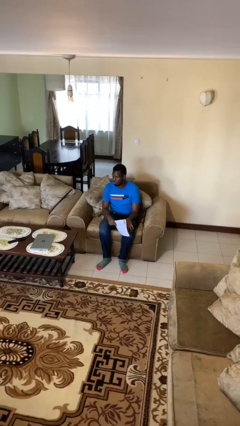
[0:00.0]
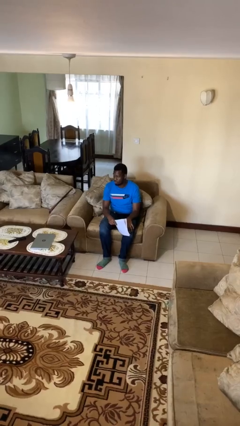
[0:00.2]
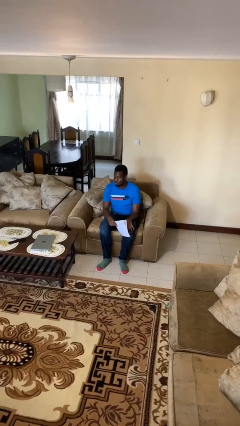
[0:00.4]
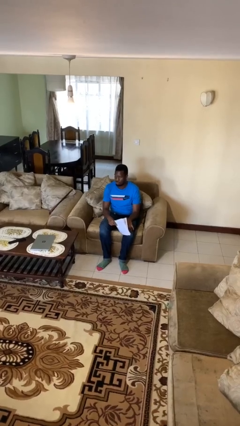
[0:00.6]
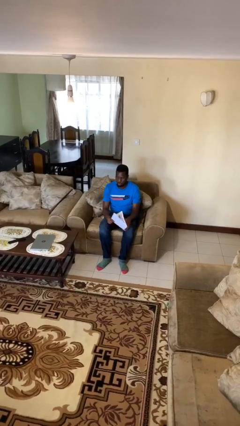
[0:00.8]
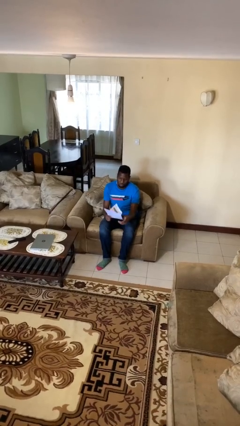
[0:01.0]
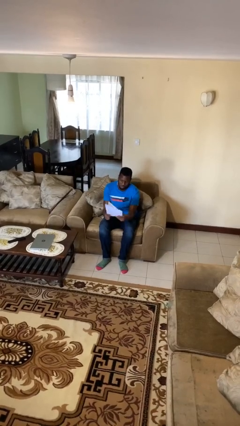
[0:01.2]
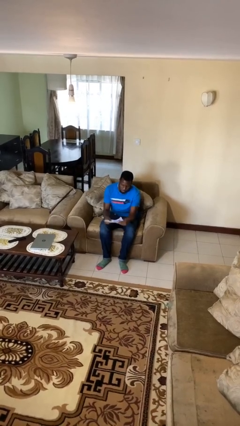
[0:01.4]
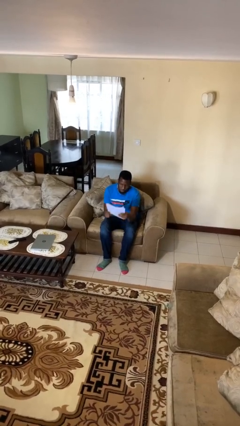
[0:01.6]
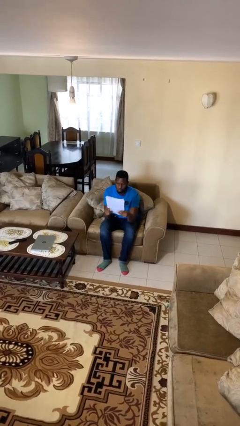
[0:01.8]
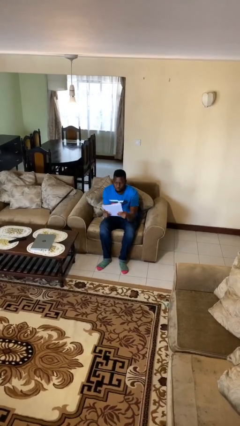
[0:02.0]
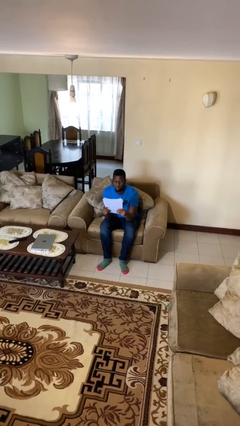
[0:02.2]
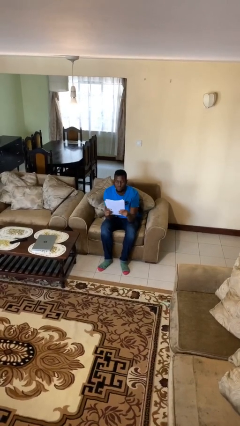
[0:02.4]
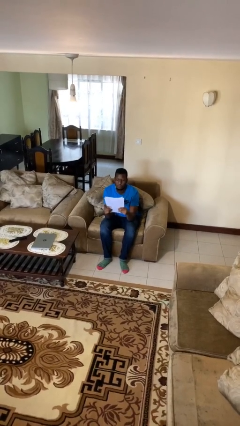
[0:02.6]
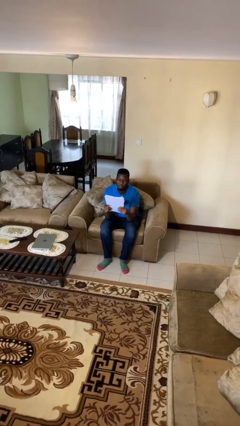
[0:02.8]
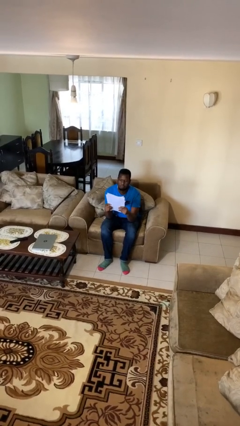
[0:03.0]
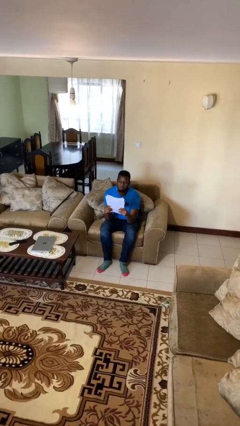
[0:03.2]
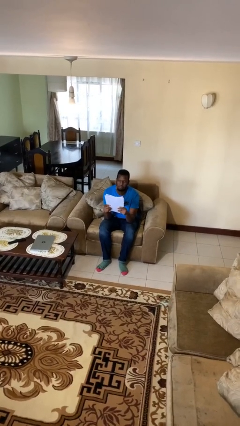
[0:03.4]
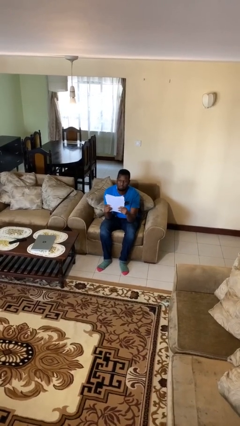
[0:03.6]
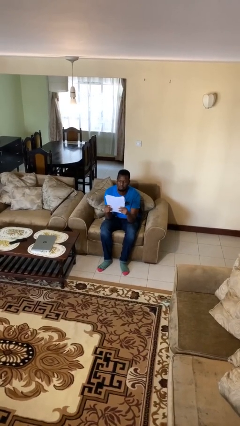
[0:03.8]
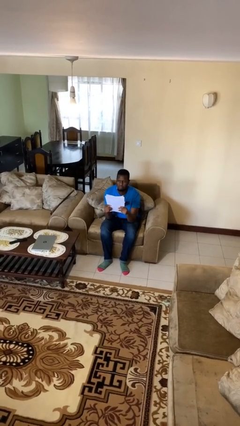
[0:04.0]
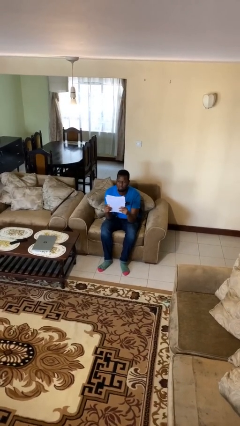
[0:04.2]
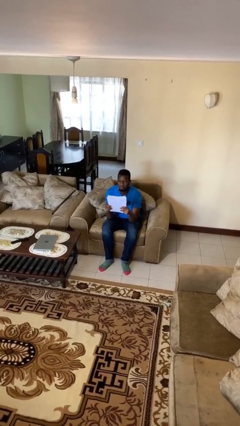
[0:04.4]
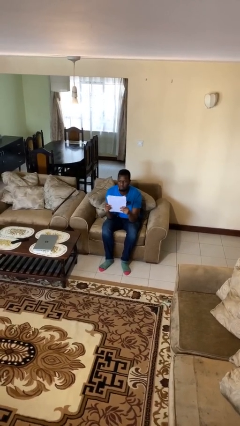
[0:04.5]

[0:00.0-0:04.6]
person reads document

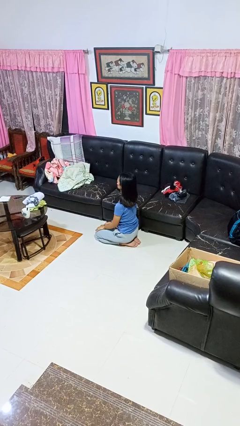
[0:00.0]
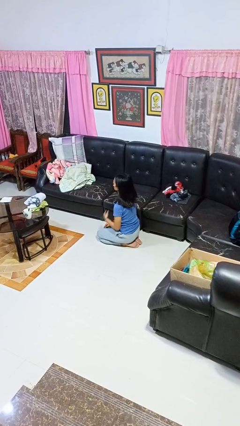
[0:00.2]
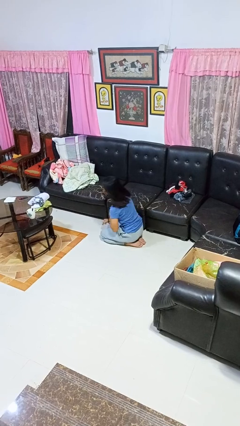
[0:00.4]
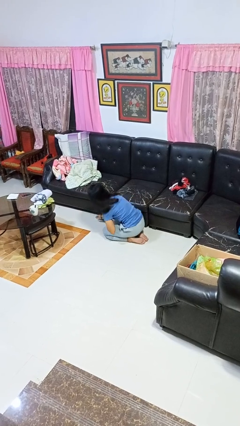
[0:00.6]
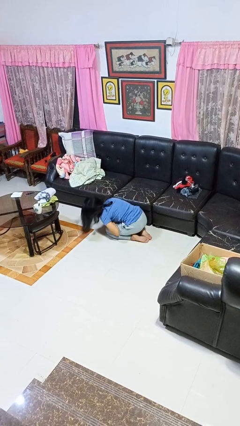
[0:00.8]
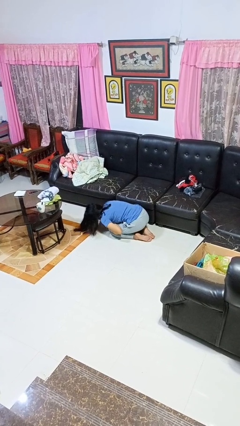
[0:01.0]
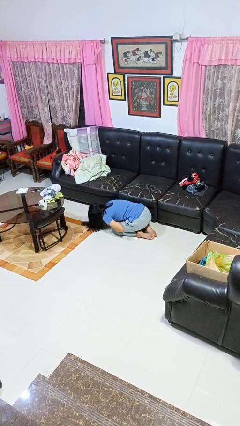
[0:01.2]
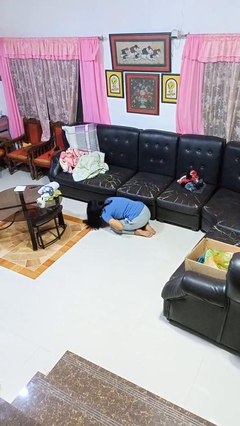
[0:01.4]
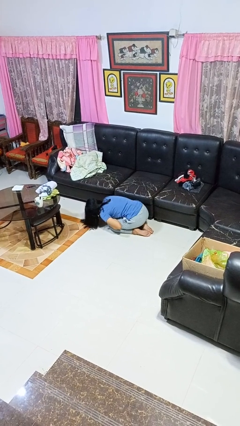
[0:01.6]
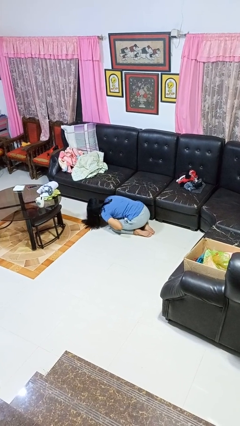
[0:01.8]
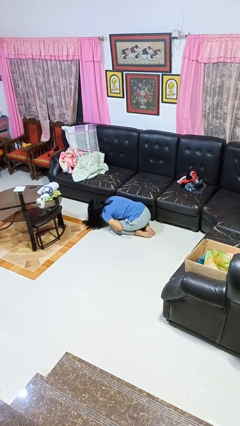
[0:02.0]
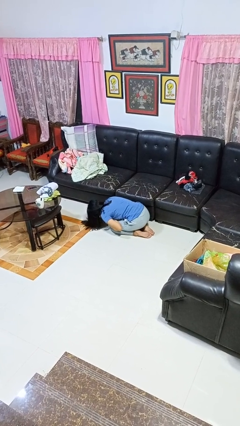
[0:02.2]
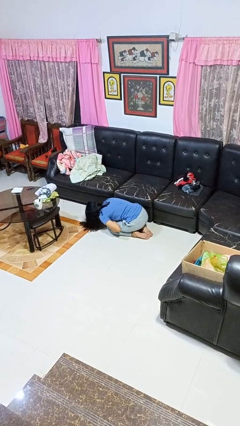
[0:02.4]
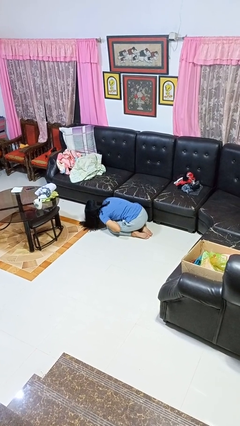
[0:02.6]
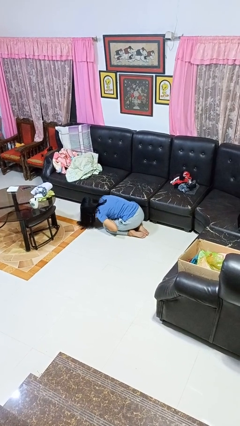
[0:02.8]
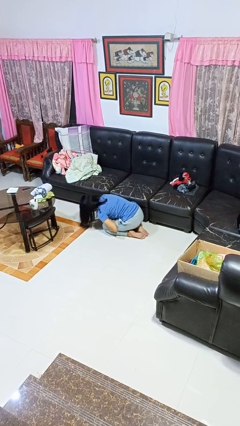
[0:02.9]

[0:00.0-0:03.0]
person searches under couch

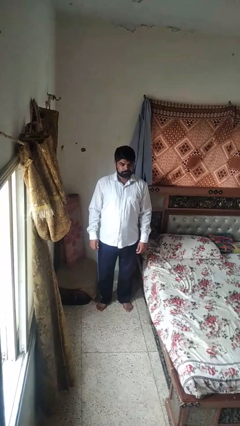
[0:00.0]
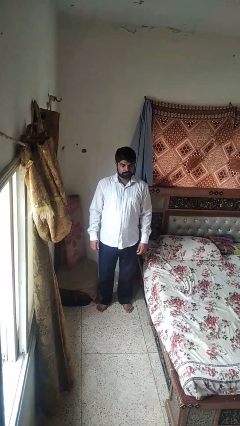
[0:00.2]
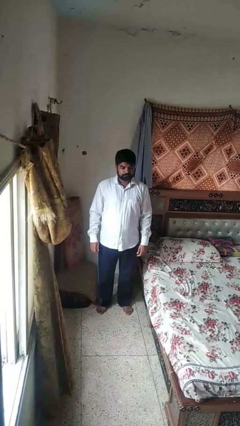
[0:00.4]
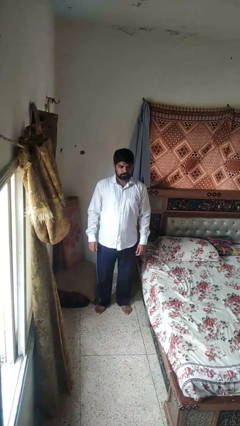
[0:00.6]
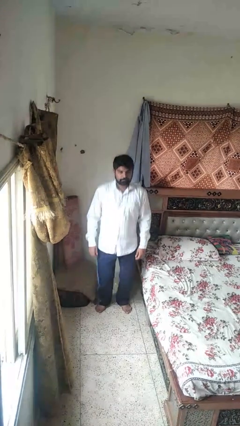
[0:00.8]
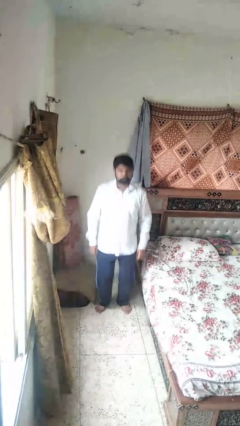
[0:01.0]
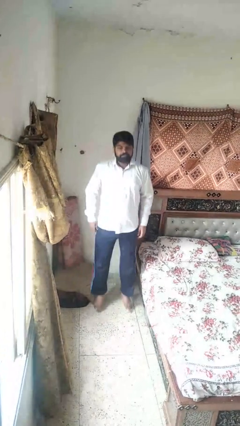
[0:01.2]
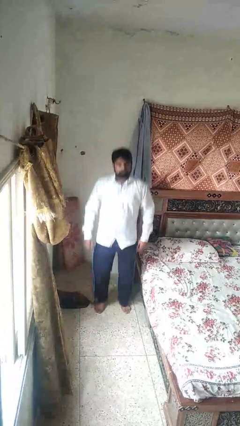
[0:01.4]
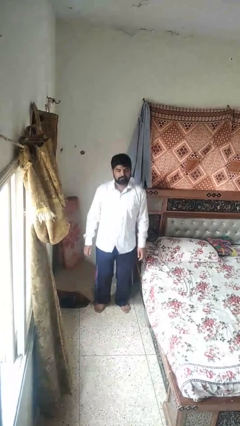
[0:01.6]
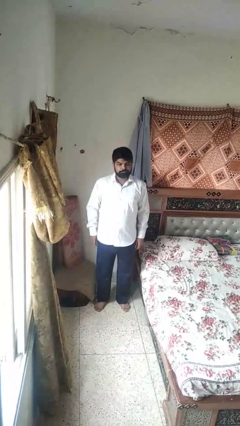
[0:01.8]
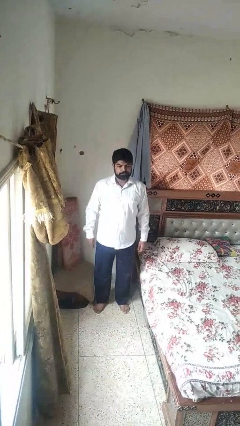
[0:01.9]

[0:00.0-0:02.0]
person jumps

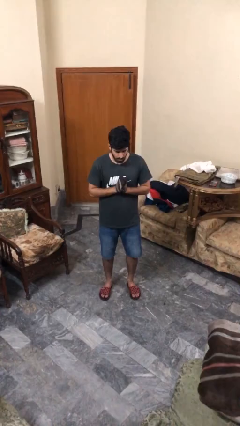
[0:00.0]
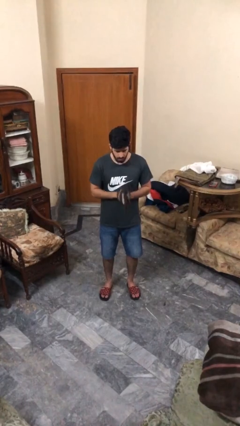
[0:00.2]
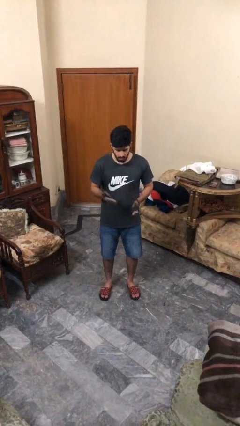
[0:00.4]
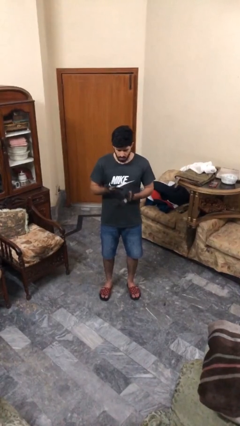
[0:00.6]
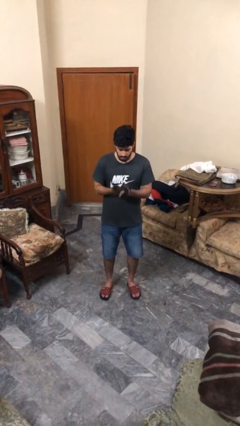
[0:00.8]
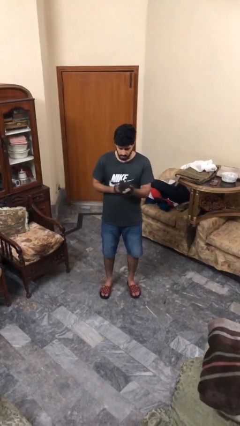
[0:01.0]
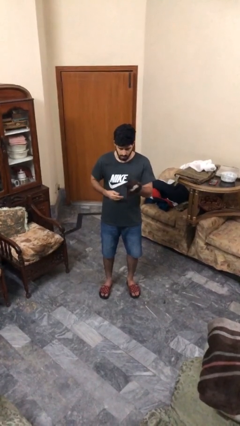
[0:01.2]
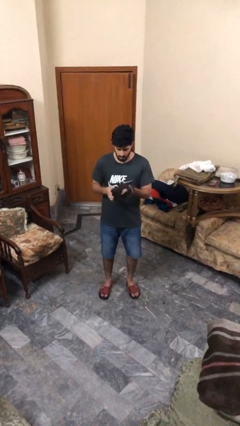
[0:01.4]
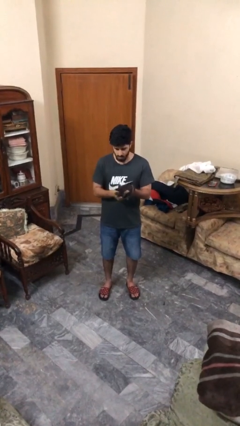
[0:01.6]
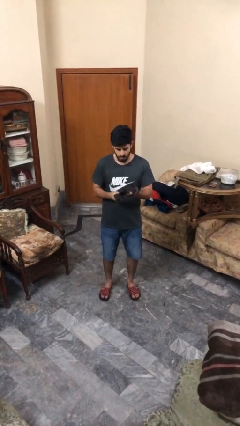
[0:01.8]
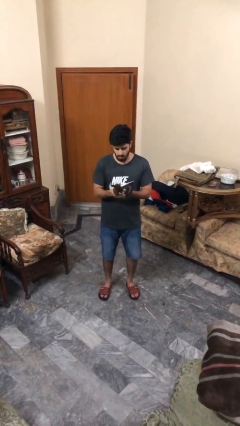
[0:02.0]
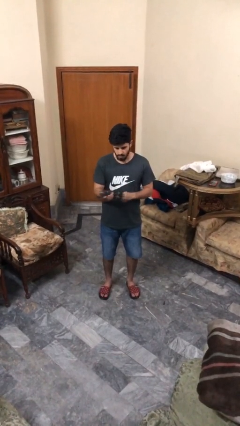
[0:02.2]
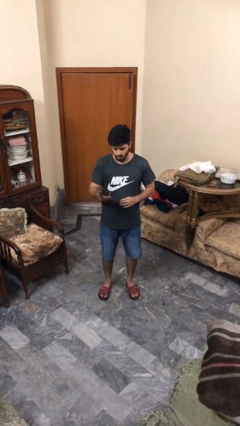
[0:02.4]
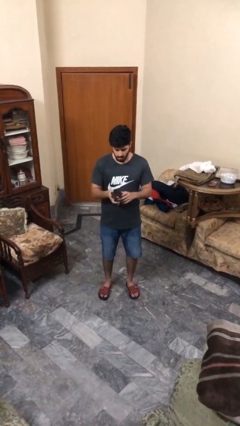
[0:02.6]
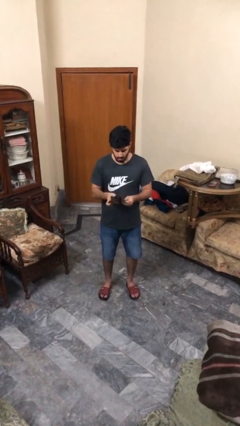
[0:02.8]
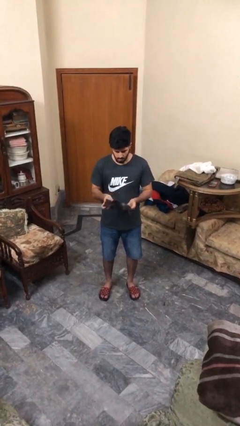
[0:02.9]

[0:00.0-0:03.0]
person takes off gloves

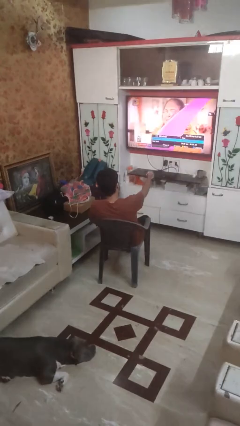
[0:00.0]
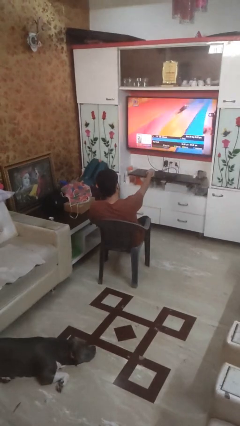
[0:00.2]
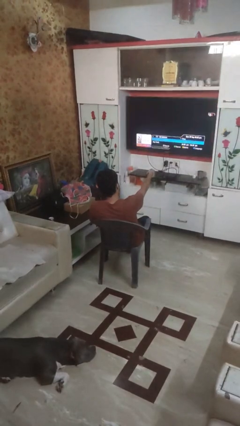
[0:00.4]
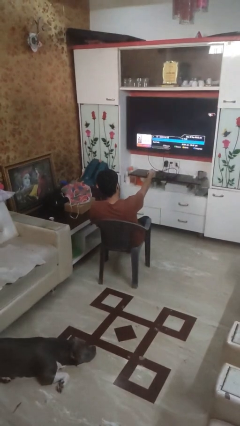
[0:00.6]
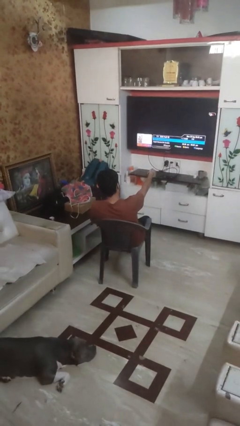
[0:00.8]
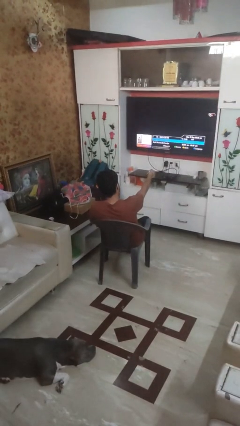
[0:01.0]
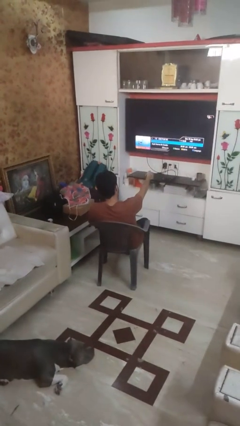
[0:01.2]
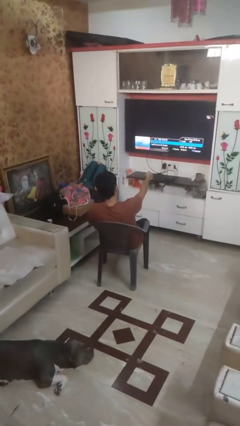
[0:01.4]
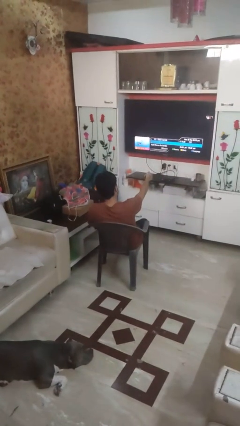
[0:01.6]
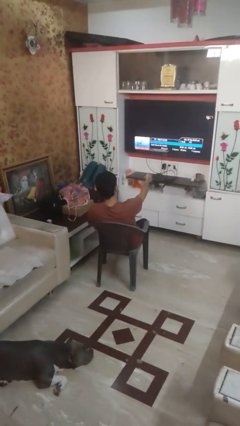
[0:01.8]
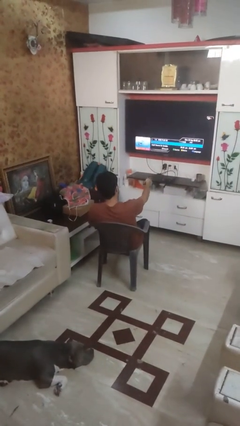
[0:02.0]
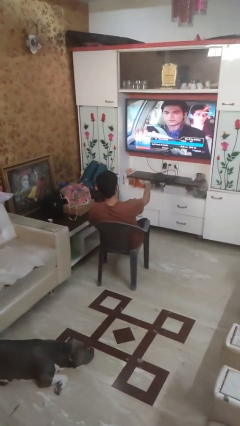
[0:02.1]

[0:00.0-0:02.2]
person uses television remote

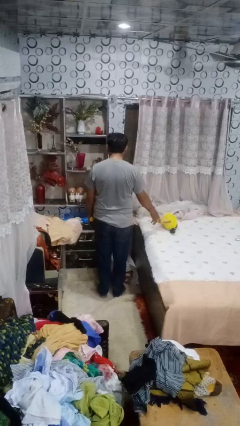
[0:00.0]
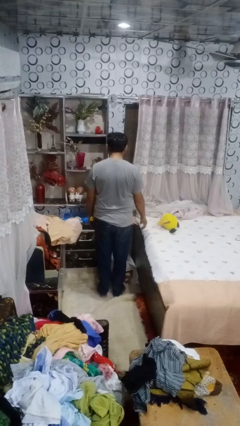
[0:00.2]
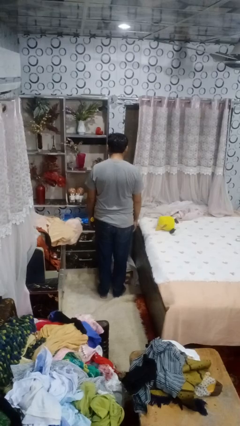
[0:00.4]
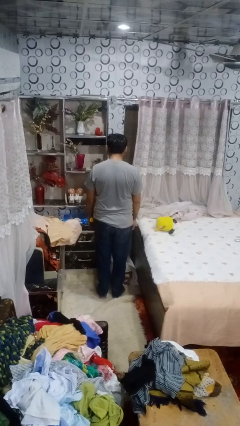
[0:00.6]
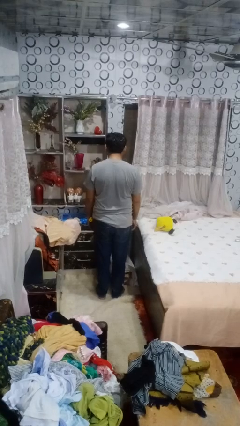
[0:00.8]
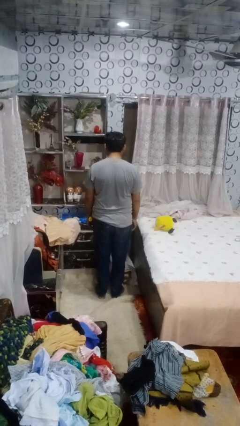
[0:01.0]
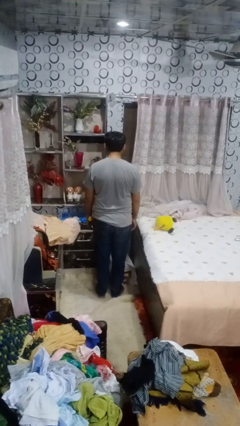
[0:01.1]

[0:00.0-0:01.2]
person throws object on bed

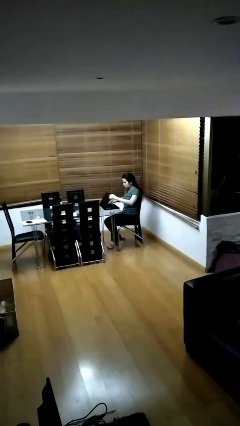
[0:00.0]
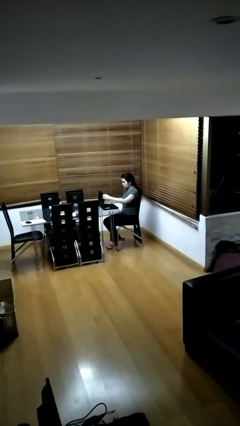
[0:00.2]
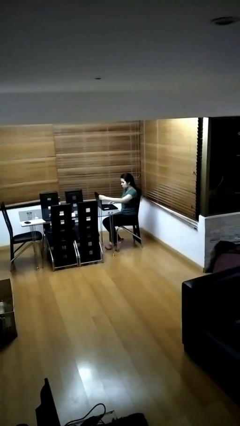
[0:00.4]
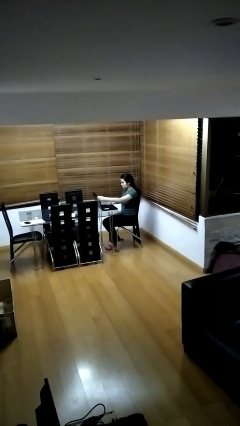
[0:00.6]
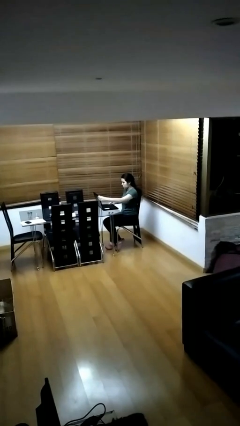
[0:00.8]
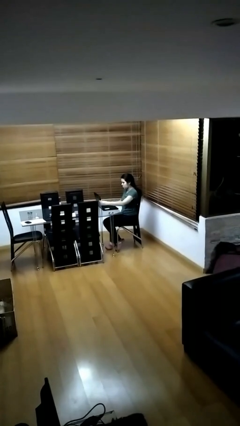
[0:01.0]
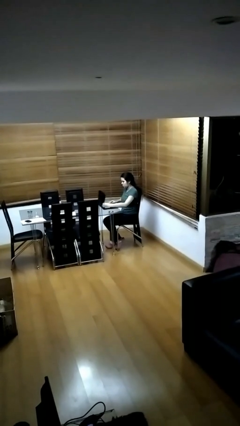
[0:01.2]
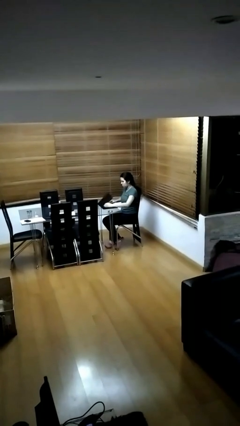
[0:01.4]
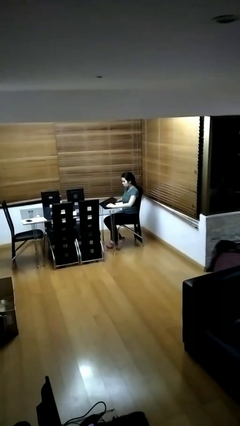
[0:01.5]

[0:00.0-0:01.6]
person interacts with laptop
